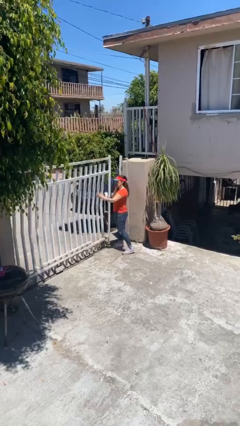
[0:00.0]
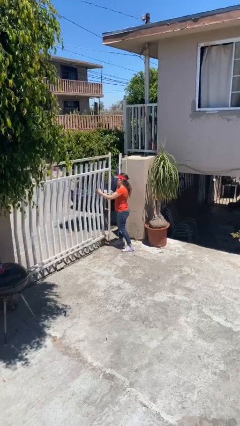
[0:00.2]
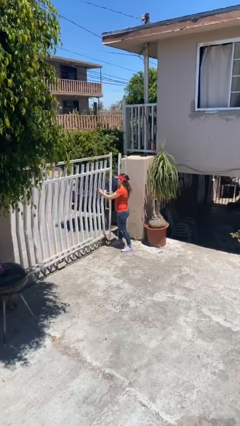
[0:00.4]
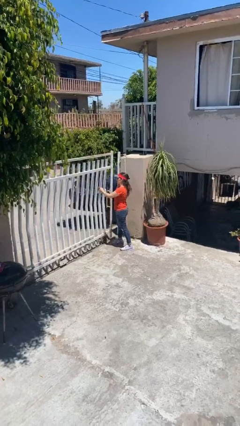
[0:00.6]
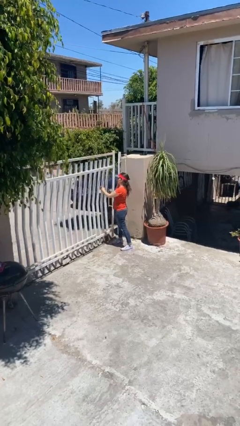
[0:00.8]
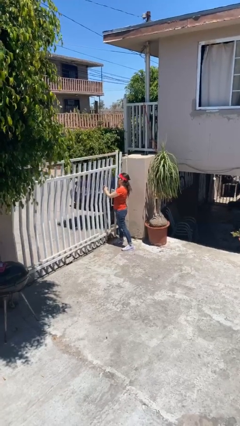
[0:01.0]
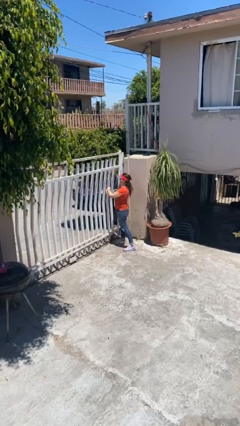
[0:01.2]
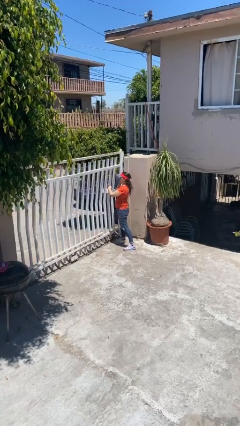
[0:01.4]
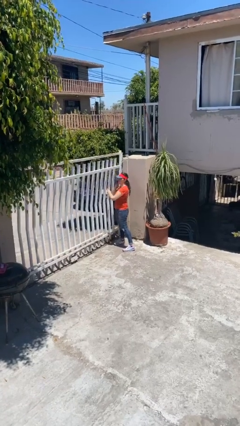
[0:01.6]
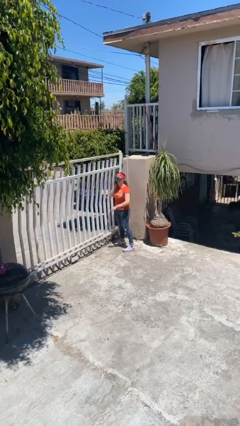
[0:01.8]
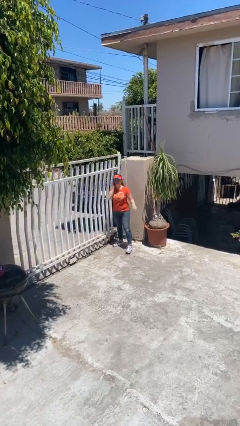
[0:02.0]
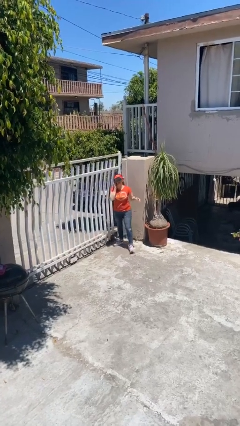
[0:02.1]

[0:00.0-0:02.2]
person closes facility door

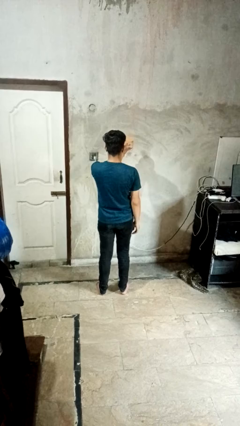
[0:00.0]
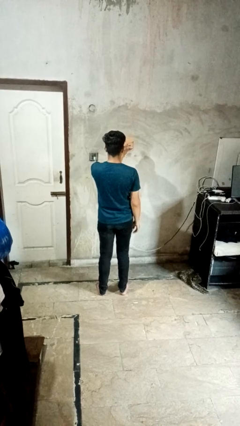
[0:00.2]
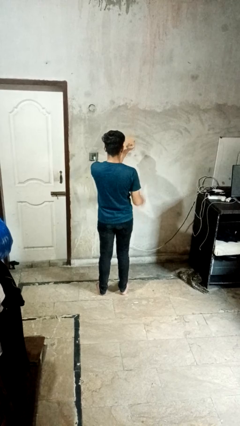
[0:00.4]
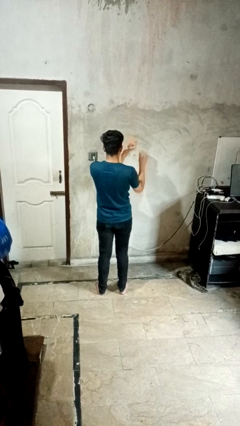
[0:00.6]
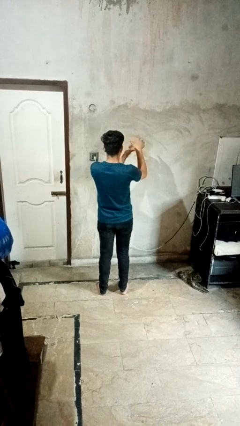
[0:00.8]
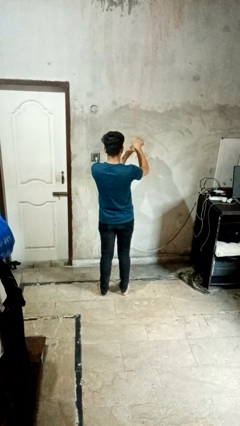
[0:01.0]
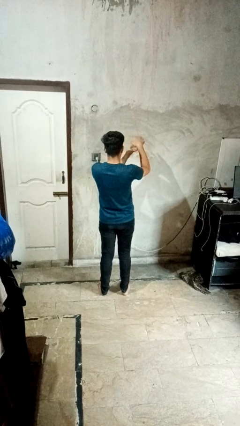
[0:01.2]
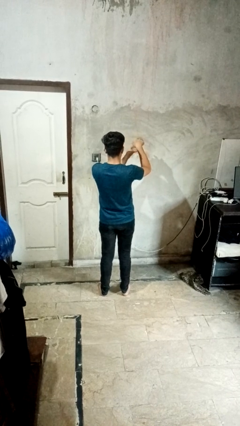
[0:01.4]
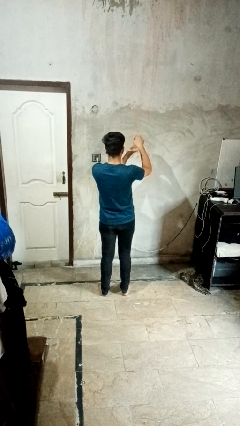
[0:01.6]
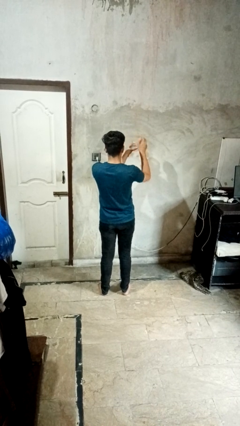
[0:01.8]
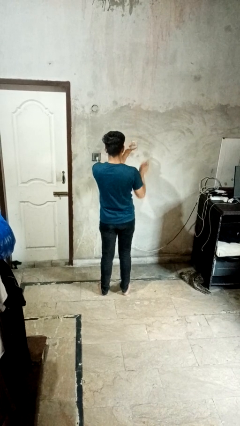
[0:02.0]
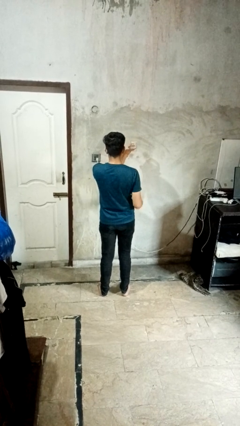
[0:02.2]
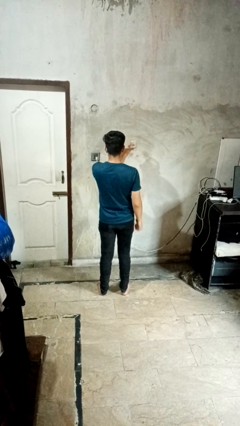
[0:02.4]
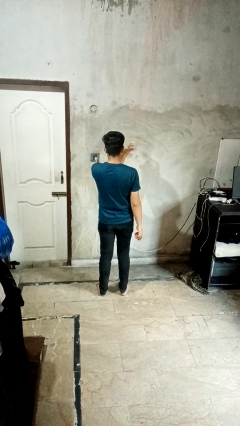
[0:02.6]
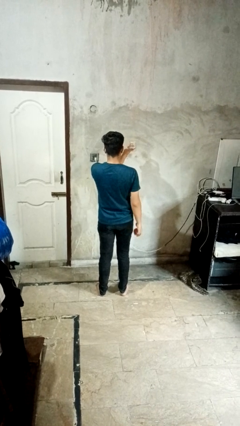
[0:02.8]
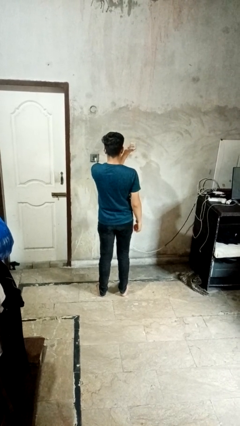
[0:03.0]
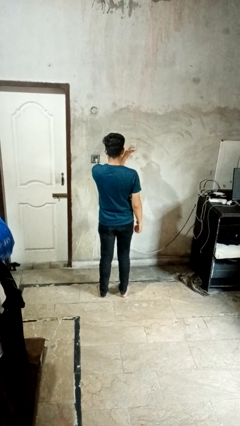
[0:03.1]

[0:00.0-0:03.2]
person opens jar

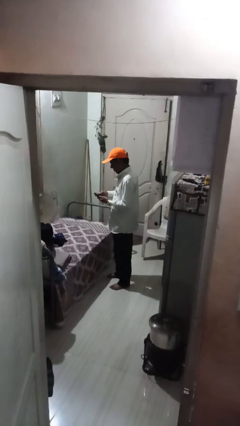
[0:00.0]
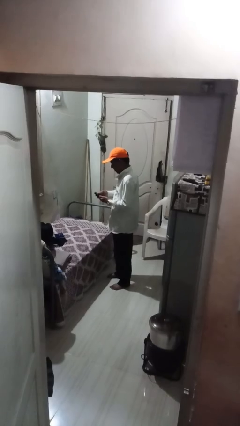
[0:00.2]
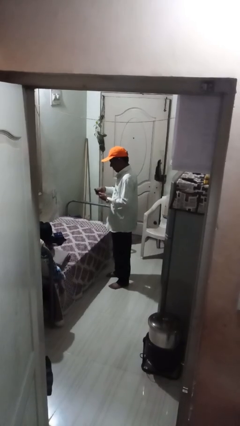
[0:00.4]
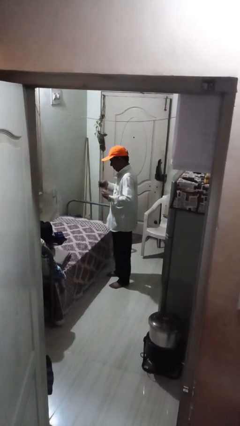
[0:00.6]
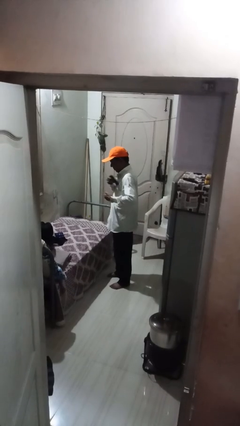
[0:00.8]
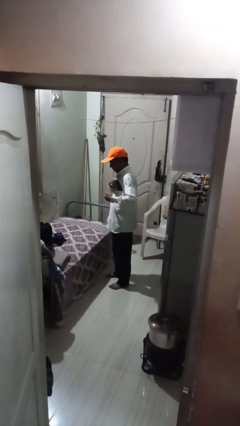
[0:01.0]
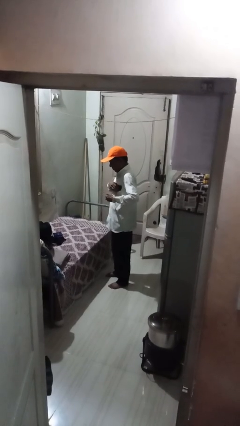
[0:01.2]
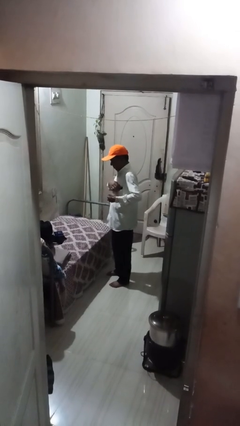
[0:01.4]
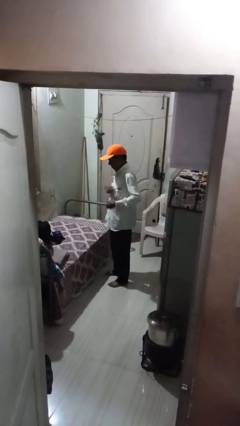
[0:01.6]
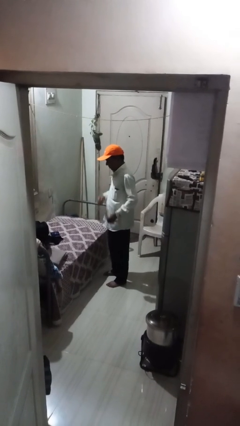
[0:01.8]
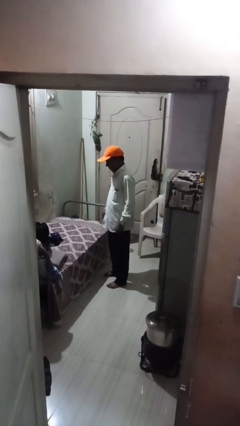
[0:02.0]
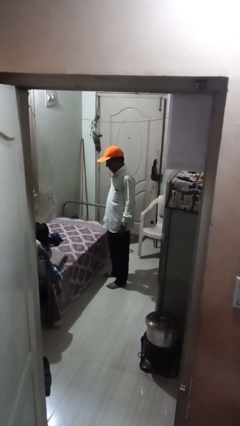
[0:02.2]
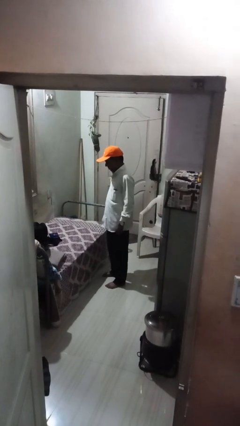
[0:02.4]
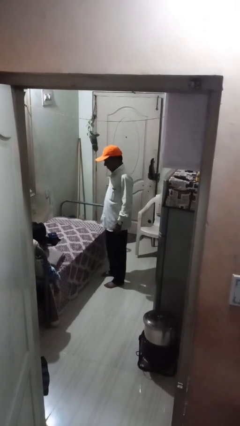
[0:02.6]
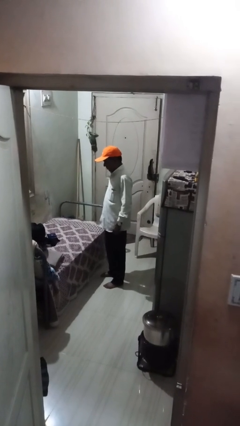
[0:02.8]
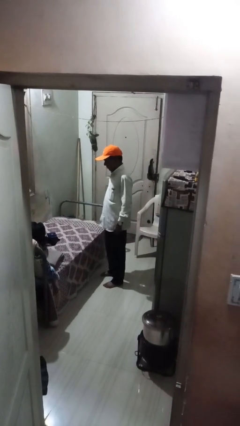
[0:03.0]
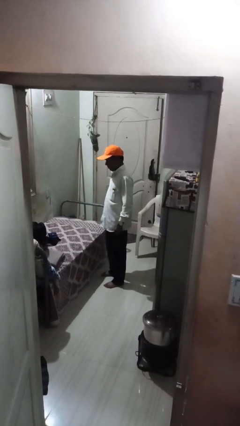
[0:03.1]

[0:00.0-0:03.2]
person puts phone into pocket

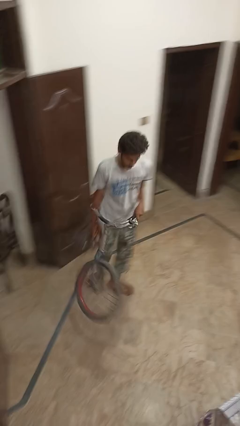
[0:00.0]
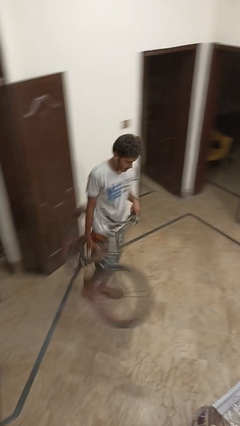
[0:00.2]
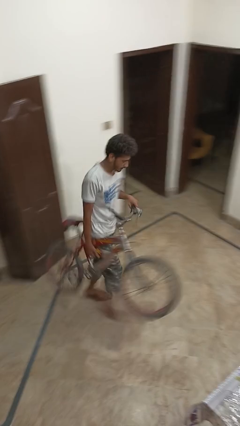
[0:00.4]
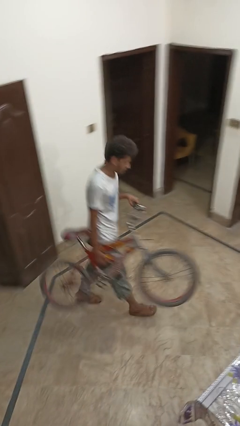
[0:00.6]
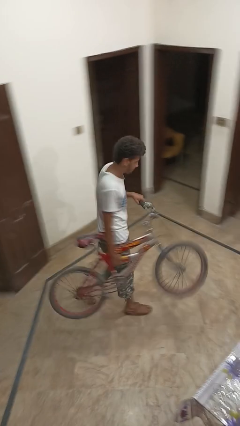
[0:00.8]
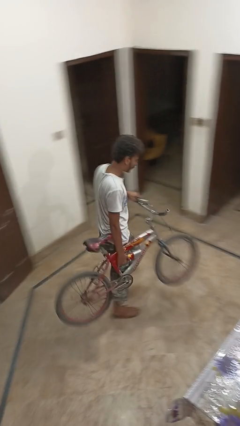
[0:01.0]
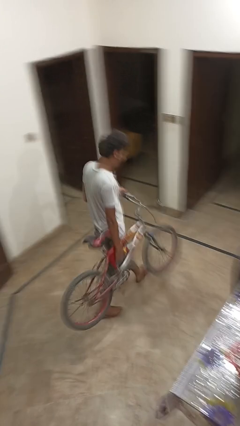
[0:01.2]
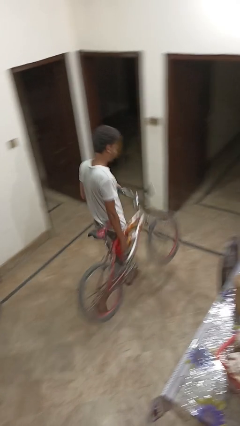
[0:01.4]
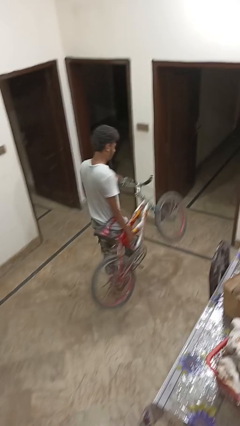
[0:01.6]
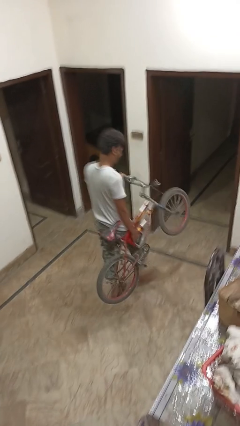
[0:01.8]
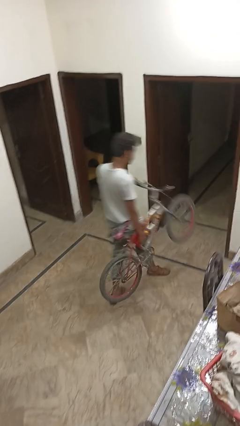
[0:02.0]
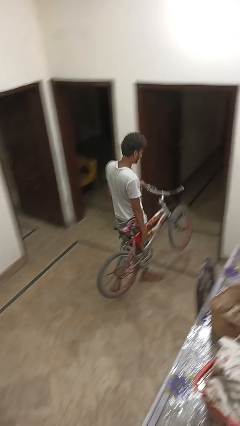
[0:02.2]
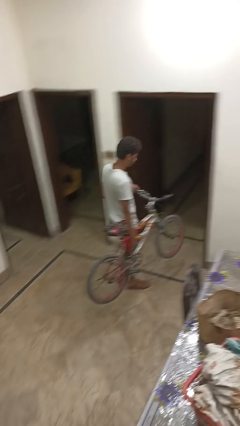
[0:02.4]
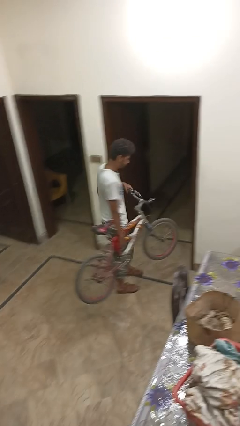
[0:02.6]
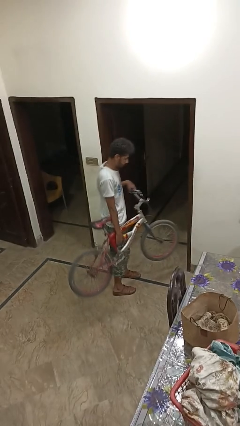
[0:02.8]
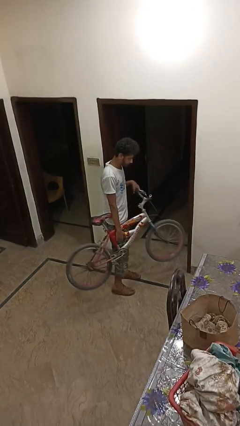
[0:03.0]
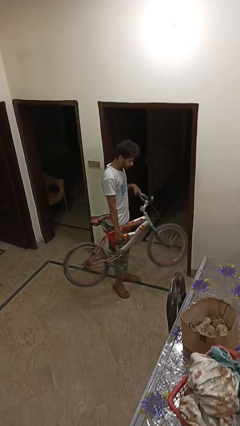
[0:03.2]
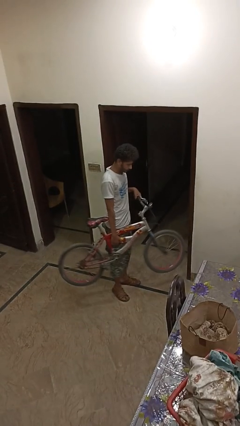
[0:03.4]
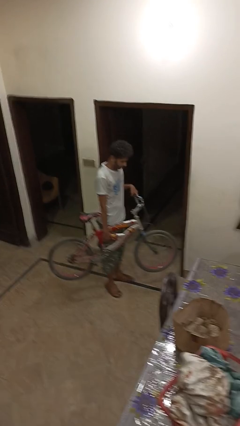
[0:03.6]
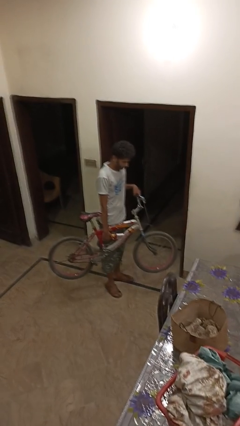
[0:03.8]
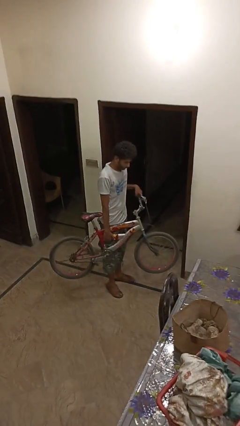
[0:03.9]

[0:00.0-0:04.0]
person carries bicycle

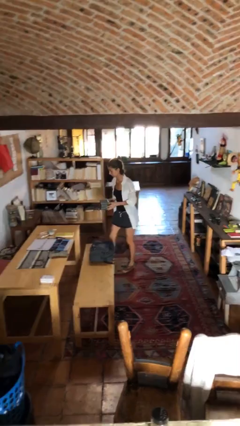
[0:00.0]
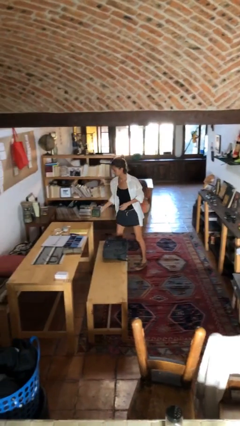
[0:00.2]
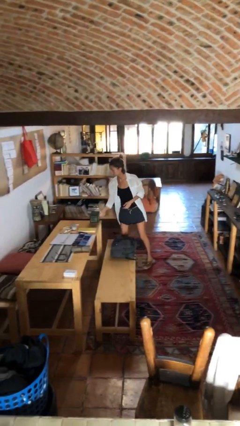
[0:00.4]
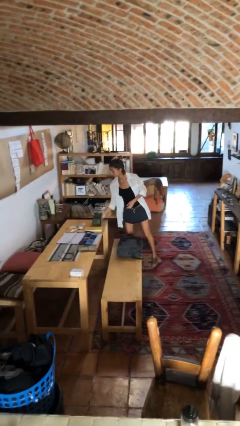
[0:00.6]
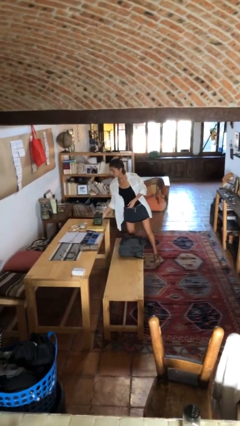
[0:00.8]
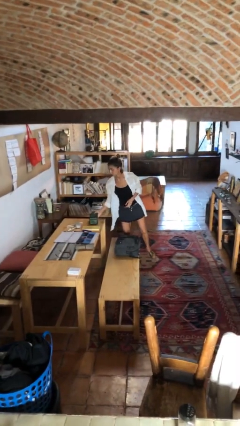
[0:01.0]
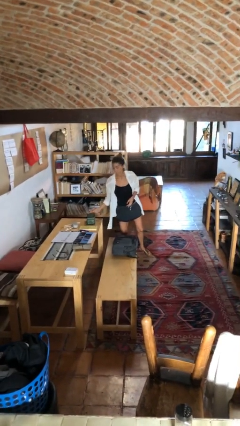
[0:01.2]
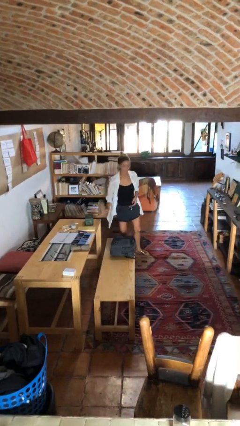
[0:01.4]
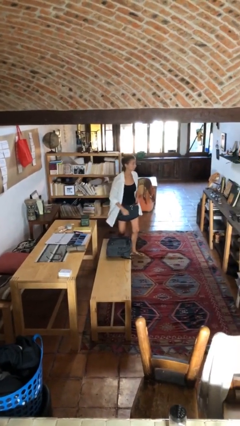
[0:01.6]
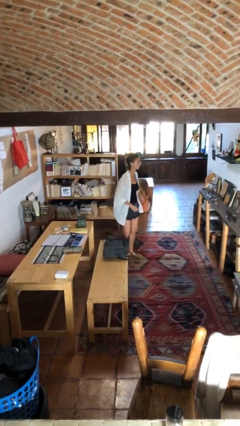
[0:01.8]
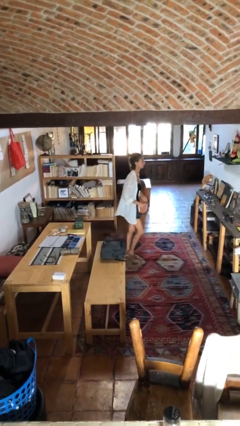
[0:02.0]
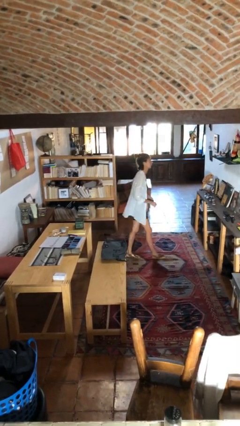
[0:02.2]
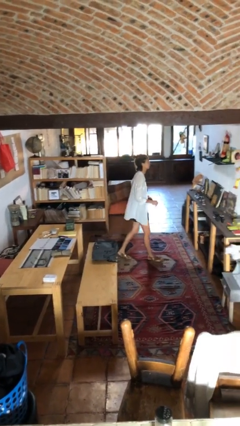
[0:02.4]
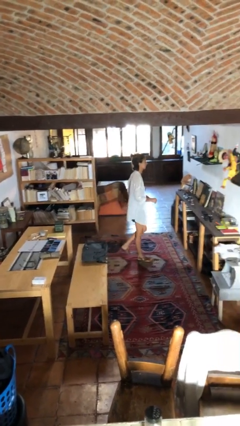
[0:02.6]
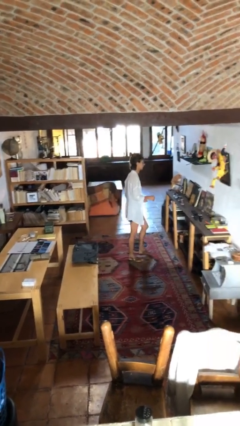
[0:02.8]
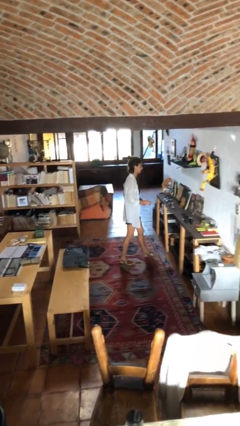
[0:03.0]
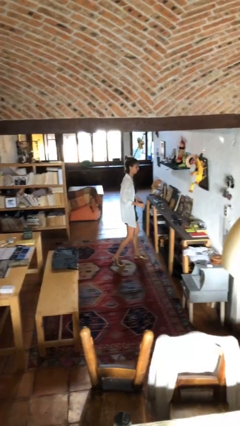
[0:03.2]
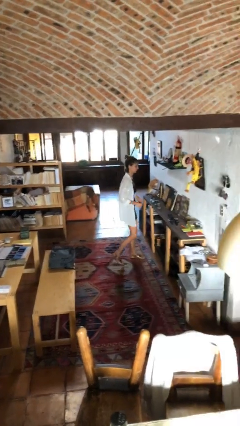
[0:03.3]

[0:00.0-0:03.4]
person puts down object on table

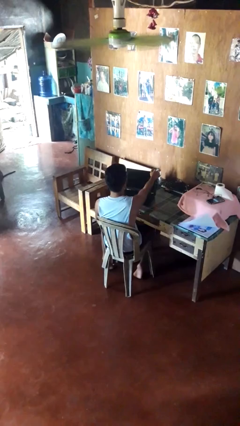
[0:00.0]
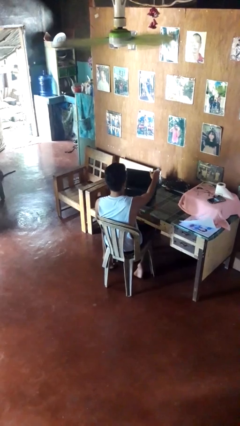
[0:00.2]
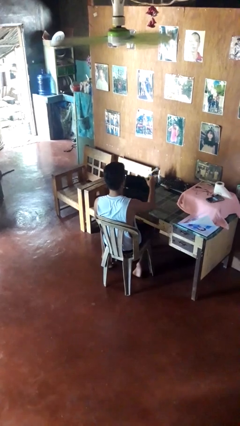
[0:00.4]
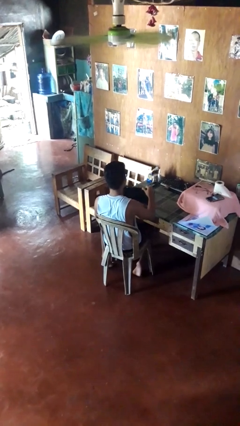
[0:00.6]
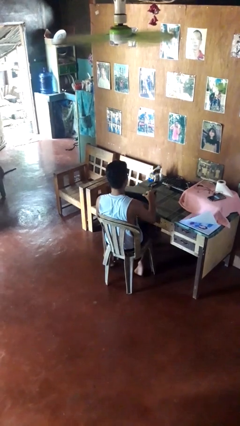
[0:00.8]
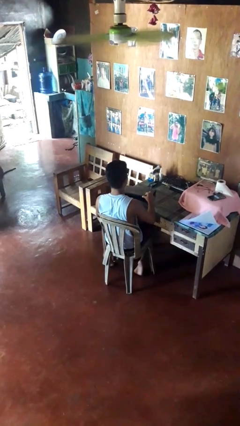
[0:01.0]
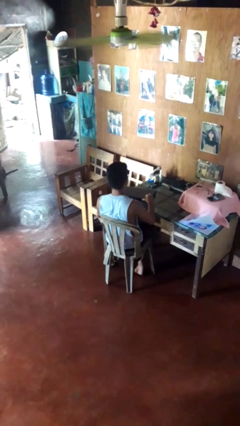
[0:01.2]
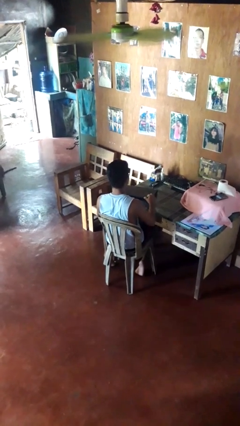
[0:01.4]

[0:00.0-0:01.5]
person closes laptop
